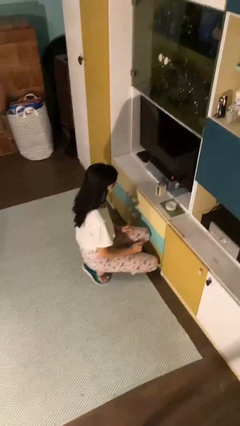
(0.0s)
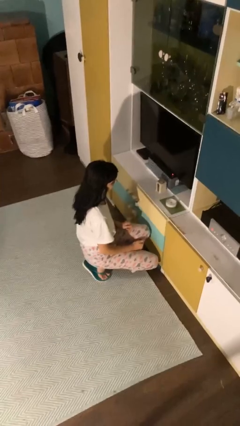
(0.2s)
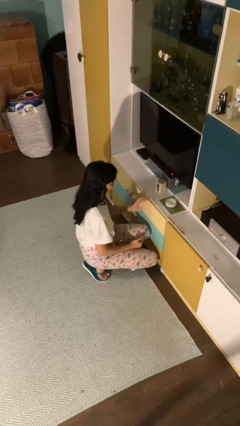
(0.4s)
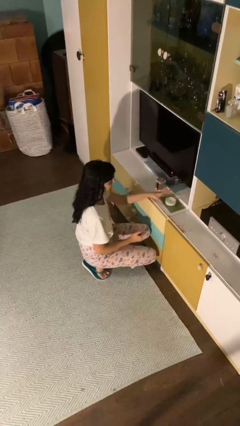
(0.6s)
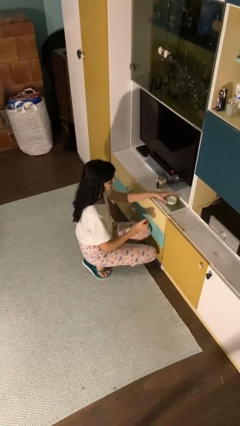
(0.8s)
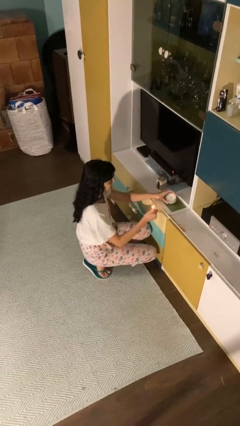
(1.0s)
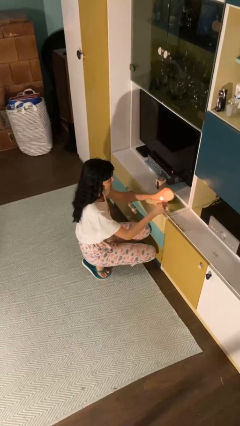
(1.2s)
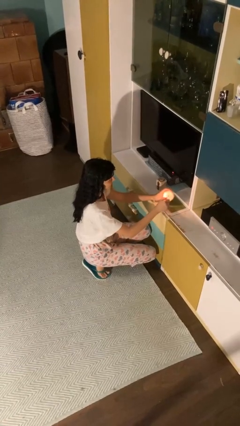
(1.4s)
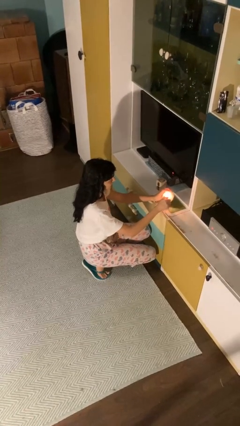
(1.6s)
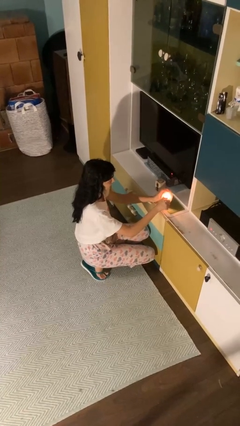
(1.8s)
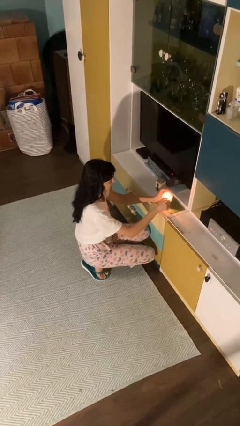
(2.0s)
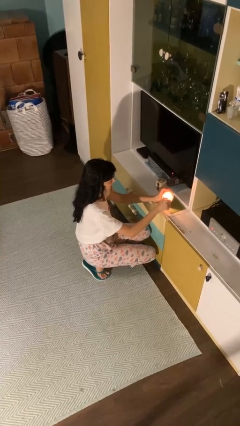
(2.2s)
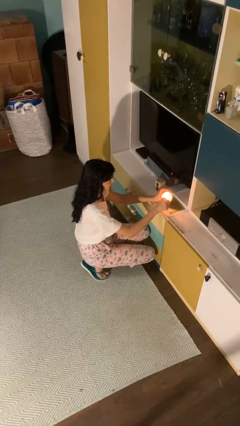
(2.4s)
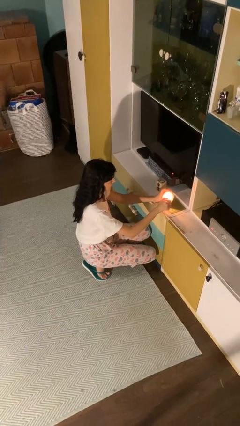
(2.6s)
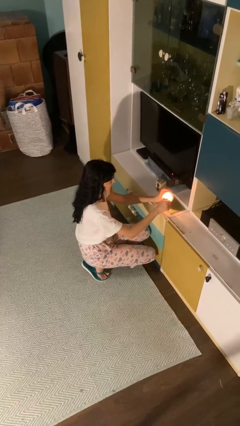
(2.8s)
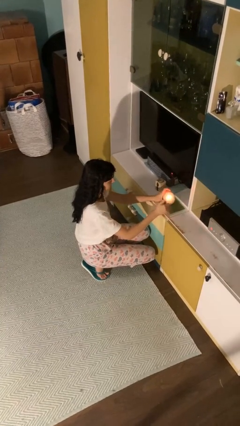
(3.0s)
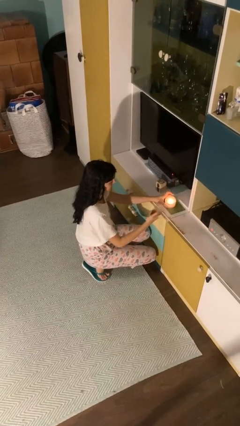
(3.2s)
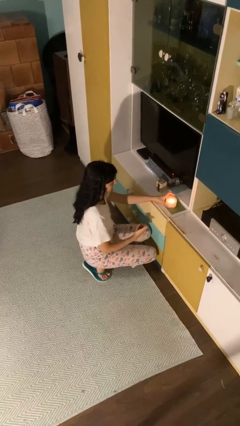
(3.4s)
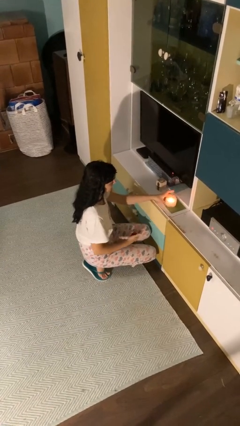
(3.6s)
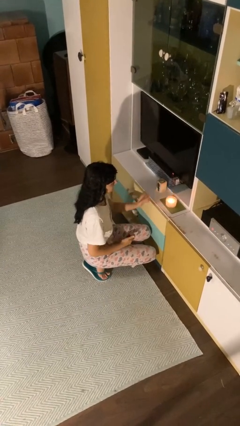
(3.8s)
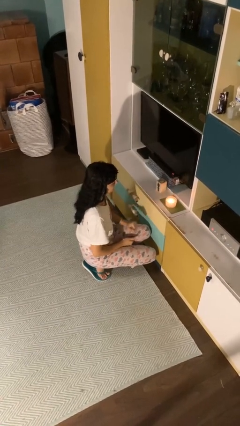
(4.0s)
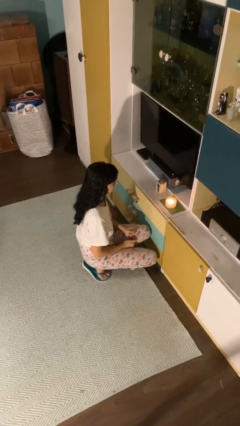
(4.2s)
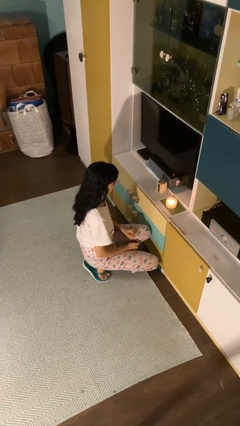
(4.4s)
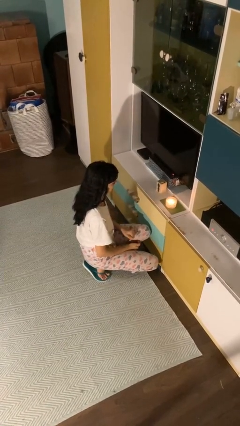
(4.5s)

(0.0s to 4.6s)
person lights candle

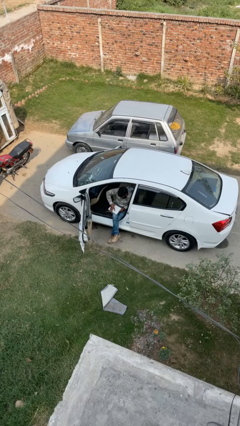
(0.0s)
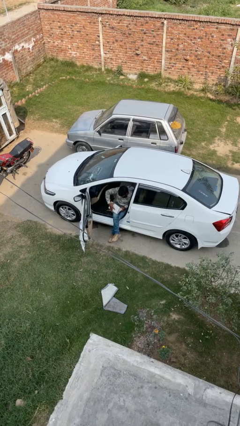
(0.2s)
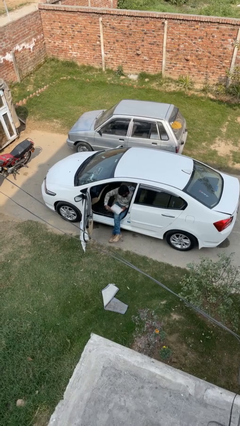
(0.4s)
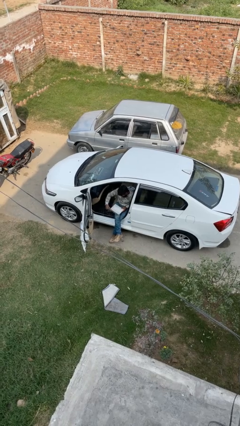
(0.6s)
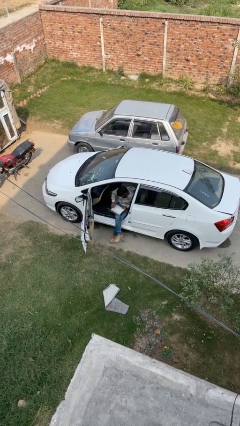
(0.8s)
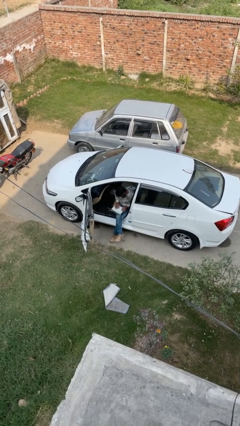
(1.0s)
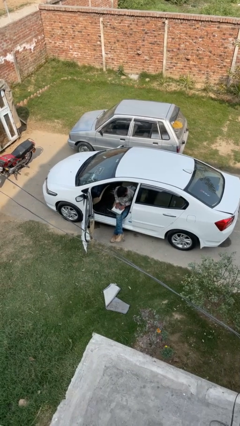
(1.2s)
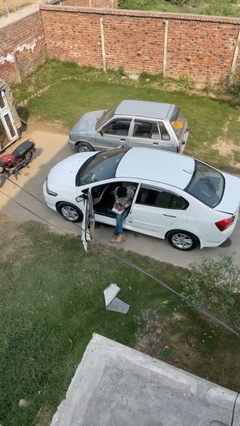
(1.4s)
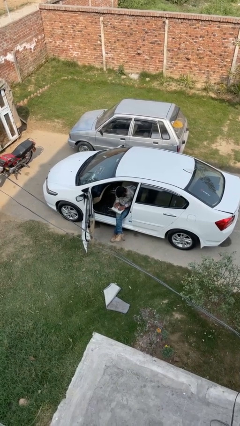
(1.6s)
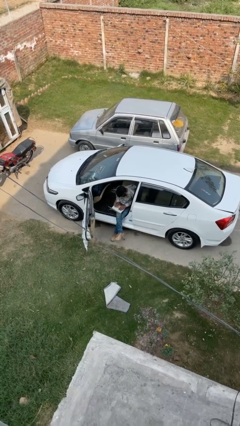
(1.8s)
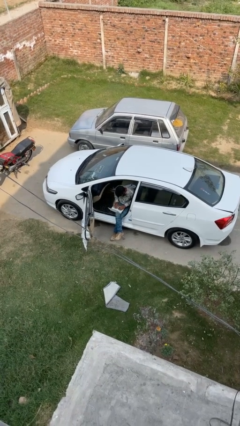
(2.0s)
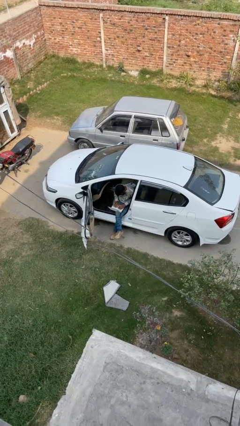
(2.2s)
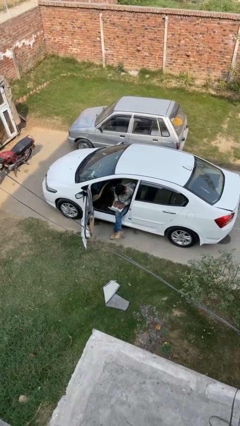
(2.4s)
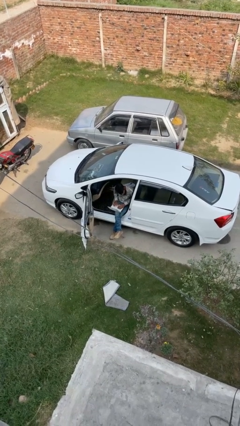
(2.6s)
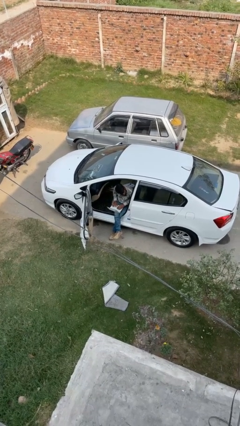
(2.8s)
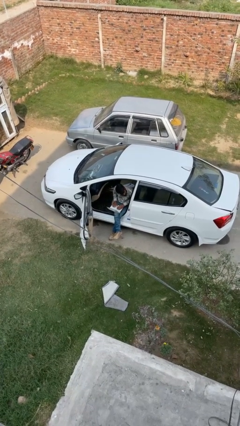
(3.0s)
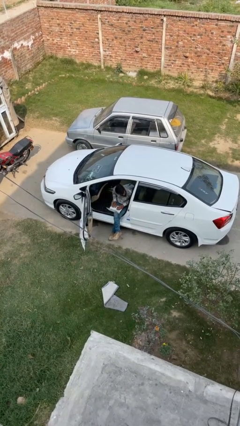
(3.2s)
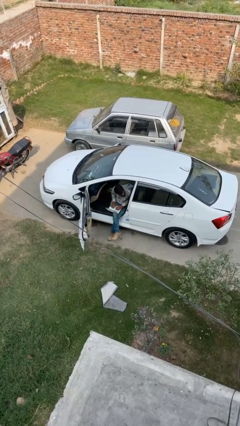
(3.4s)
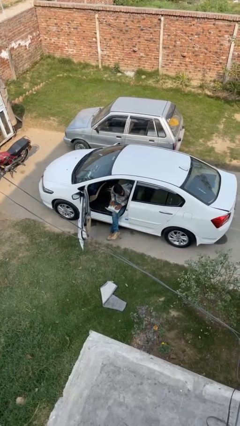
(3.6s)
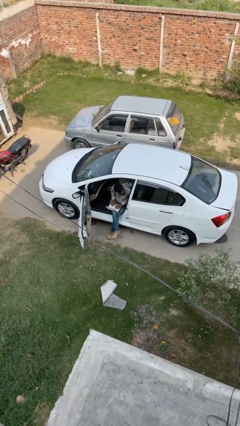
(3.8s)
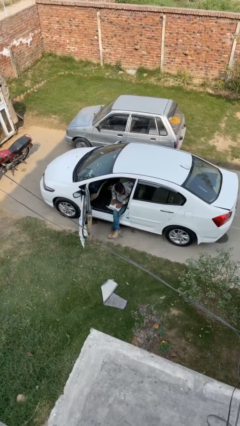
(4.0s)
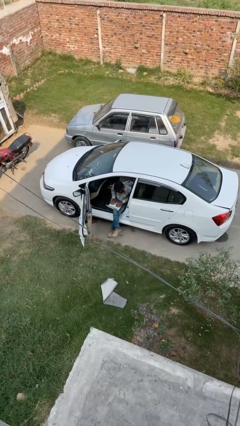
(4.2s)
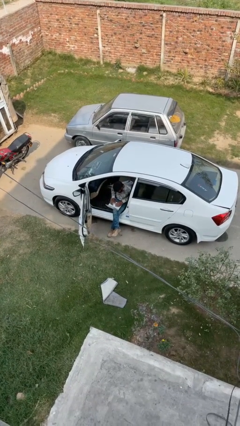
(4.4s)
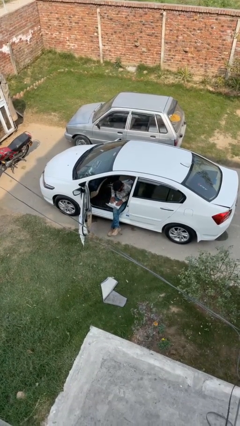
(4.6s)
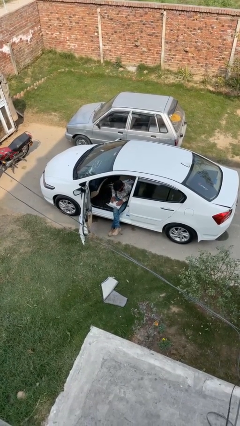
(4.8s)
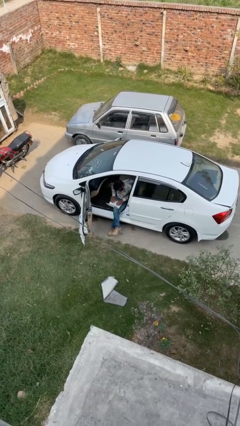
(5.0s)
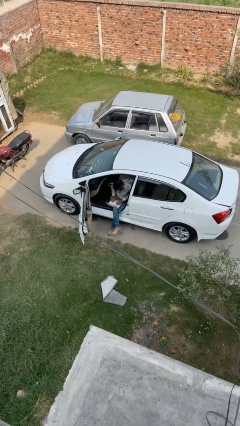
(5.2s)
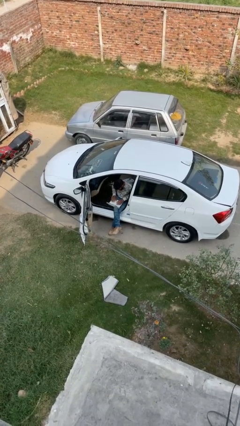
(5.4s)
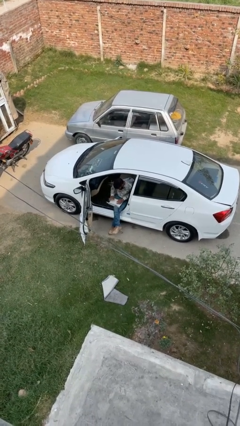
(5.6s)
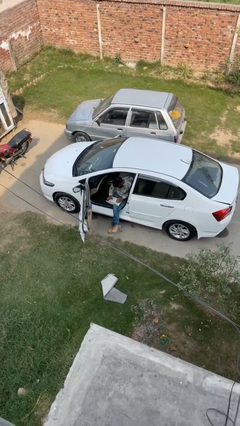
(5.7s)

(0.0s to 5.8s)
person interacts with laptop

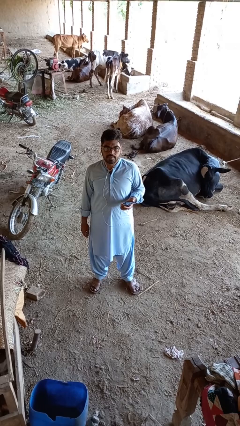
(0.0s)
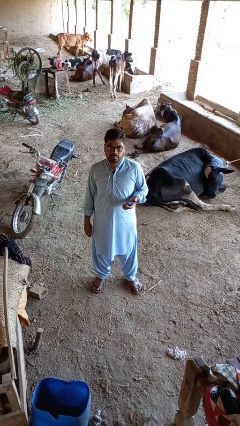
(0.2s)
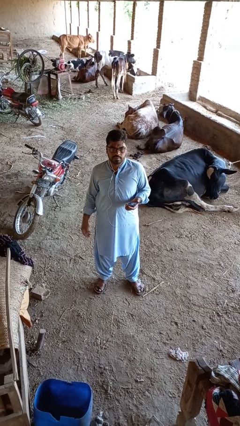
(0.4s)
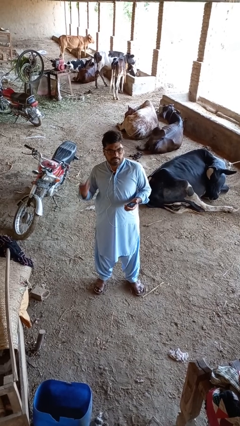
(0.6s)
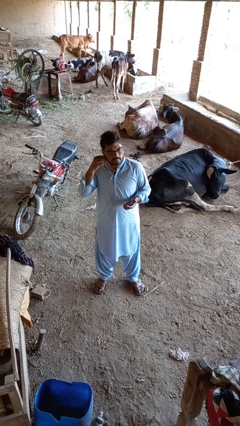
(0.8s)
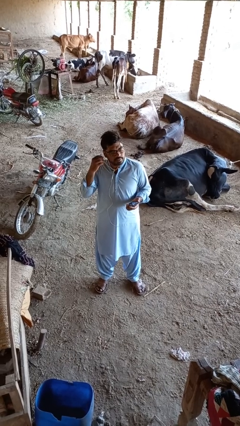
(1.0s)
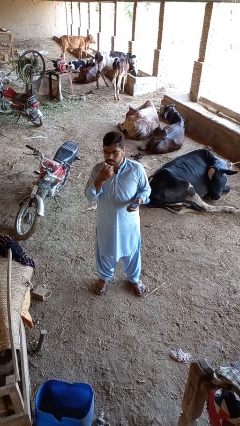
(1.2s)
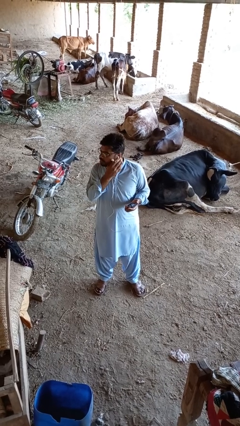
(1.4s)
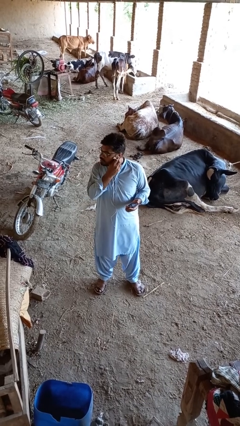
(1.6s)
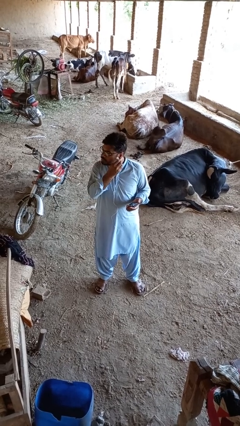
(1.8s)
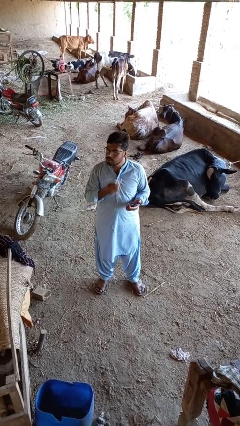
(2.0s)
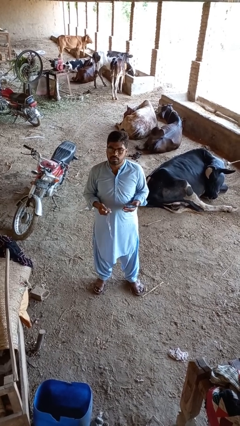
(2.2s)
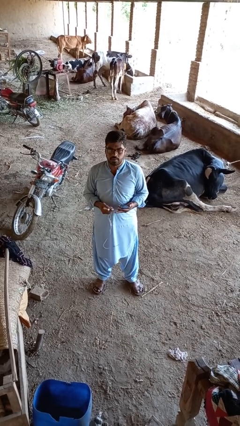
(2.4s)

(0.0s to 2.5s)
person takes off headphones

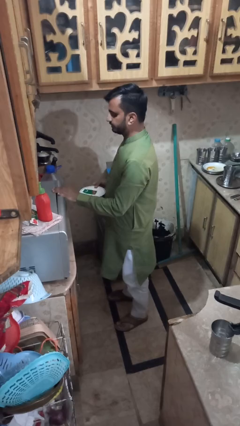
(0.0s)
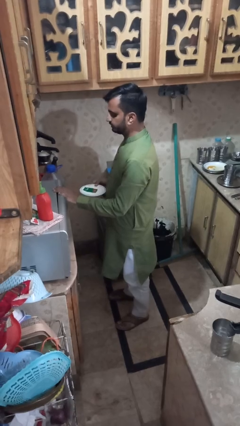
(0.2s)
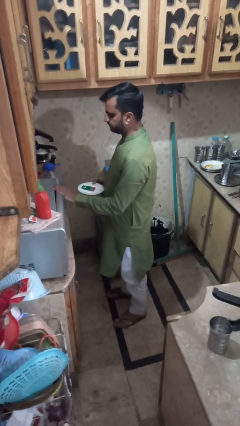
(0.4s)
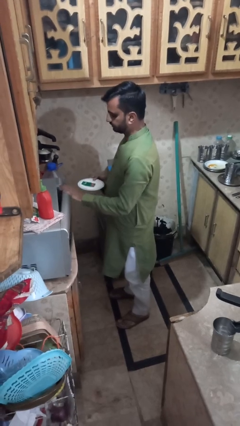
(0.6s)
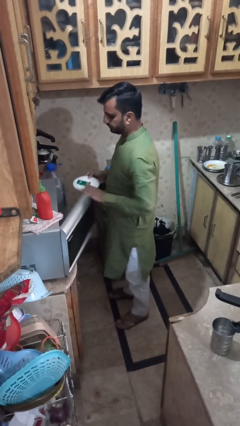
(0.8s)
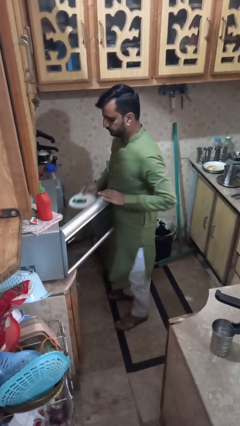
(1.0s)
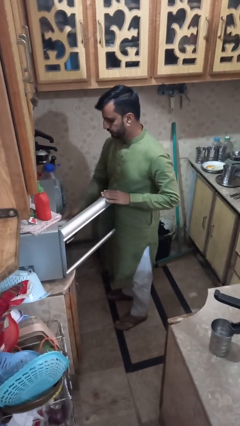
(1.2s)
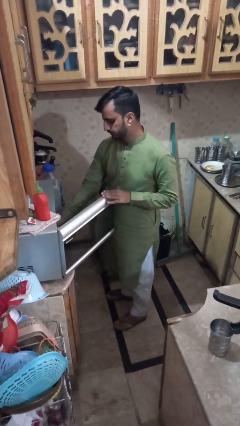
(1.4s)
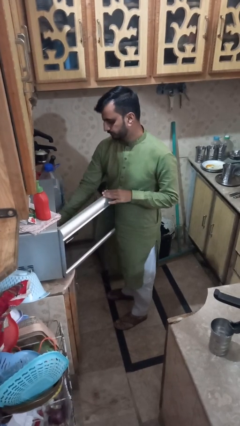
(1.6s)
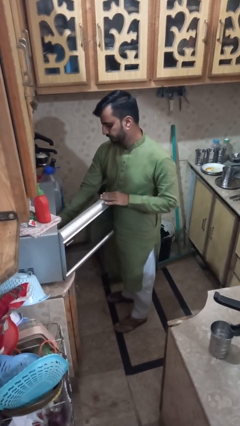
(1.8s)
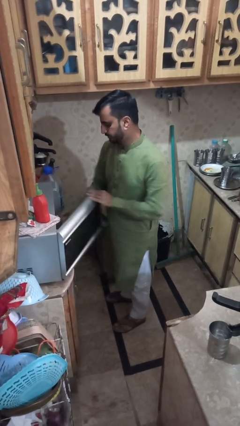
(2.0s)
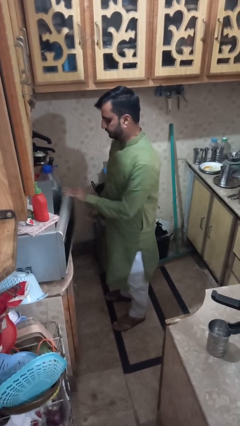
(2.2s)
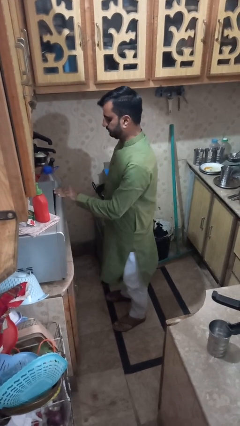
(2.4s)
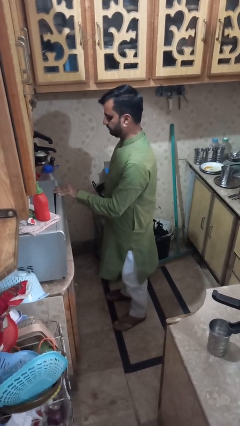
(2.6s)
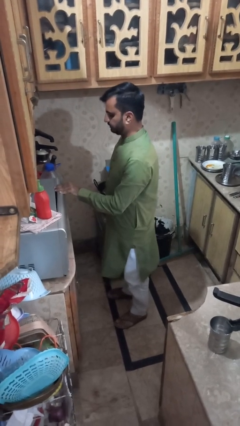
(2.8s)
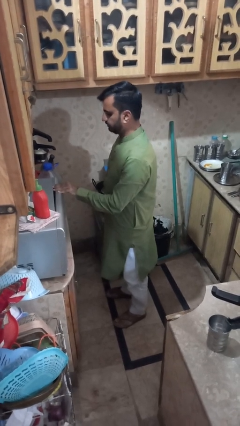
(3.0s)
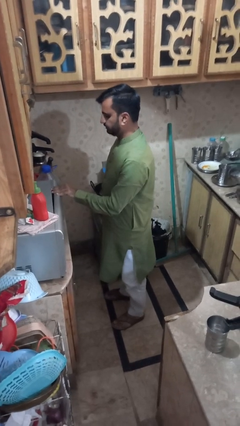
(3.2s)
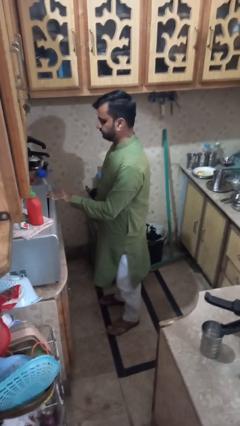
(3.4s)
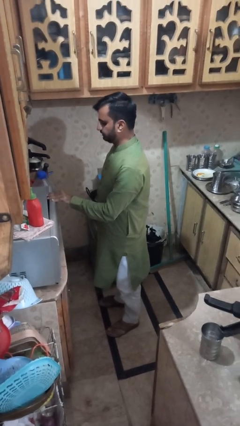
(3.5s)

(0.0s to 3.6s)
person puts object into microwave

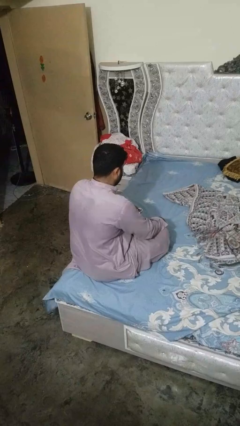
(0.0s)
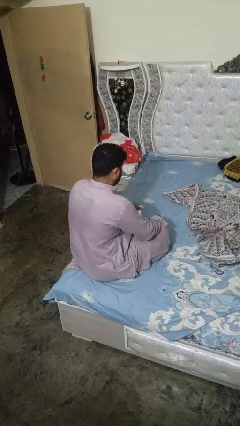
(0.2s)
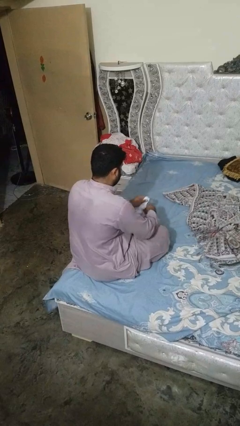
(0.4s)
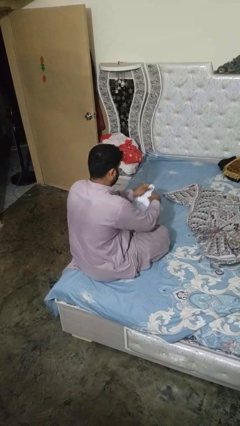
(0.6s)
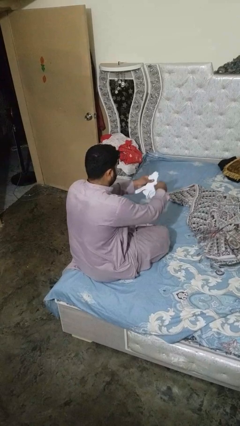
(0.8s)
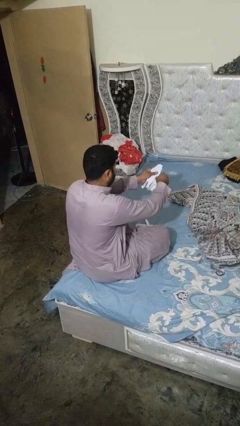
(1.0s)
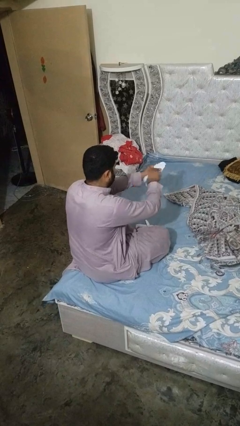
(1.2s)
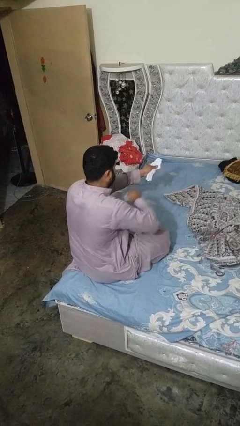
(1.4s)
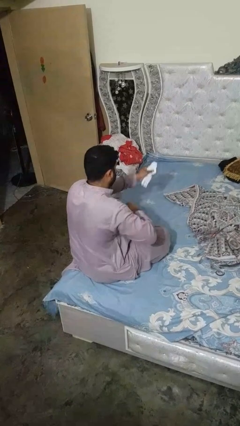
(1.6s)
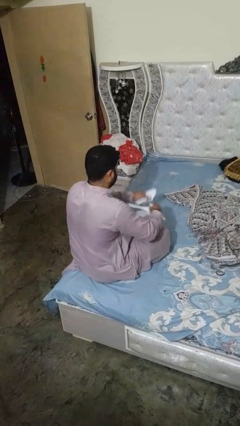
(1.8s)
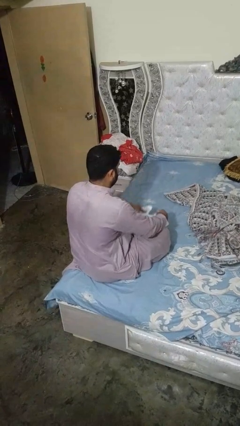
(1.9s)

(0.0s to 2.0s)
person tears paper
